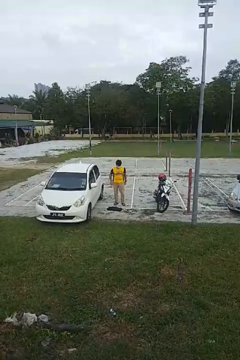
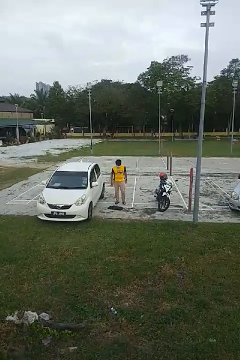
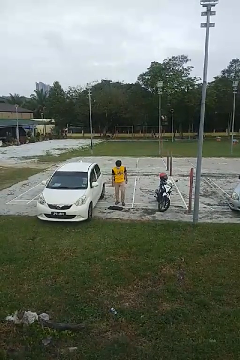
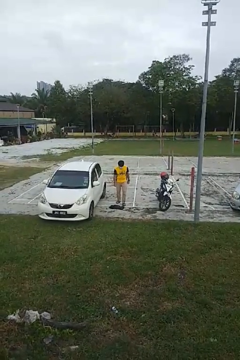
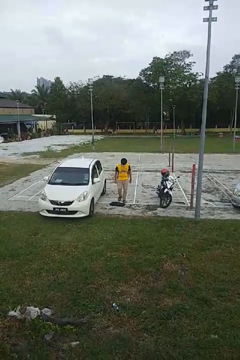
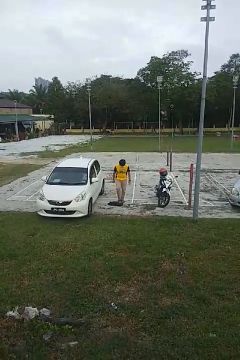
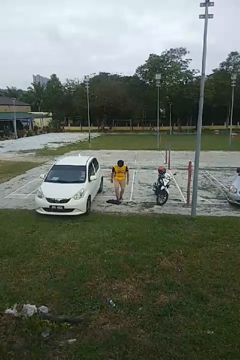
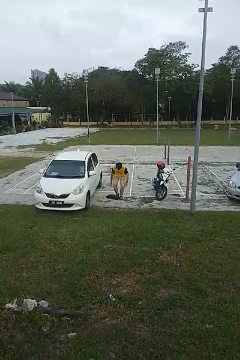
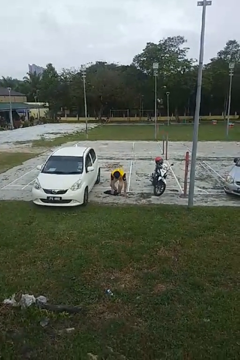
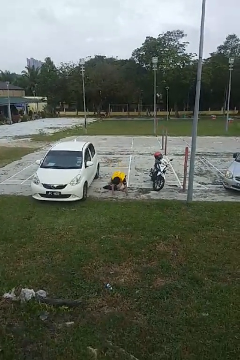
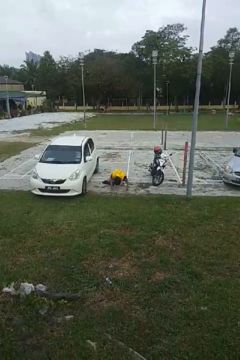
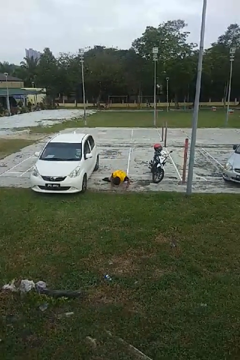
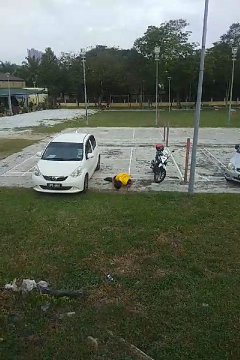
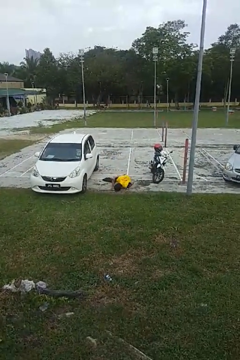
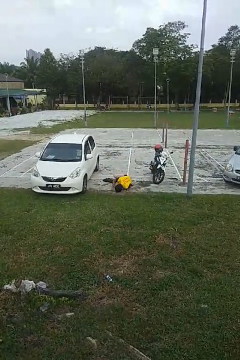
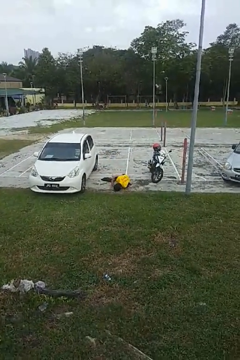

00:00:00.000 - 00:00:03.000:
person trips on object on floor

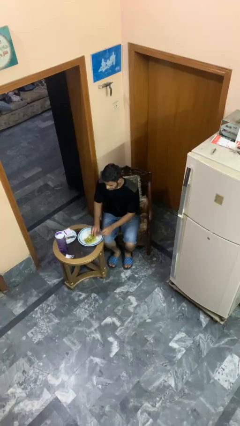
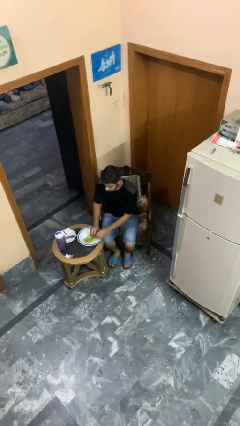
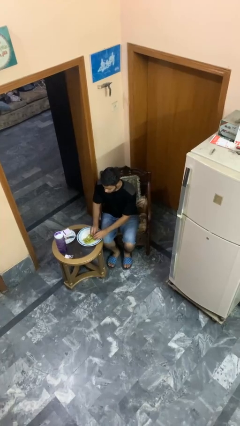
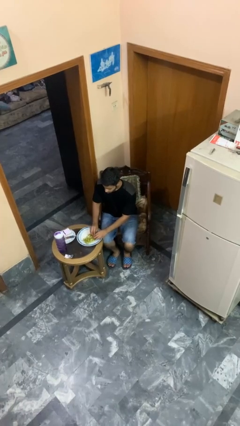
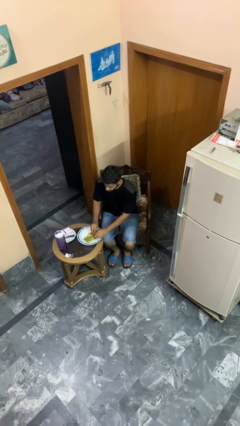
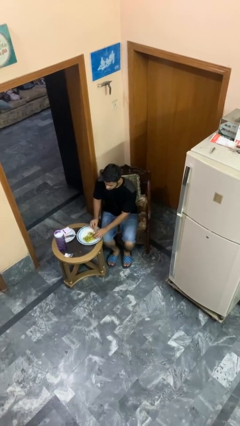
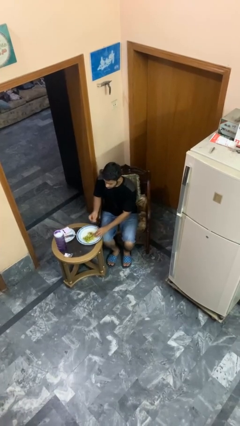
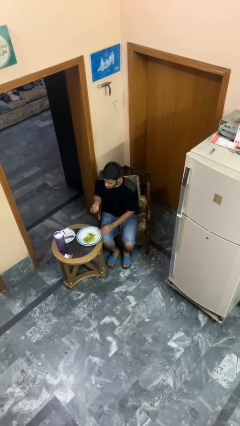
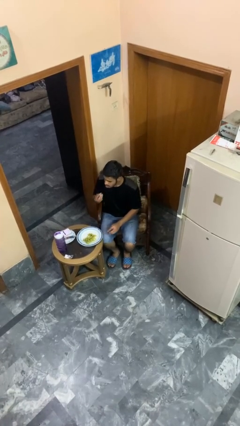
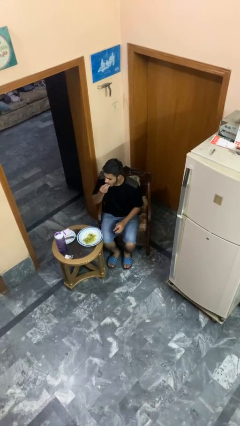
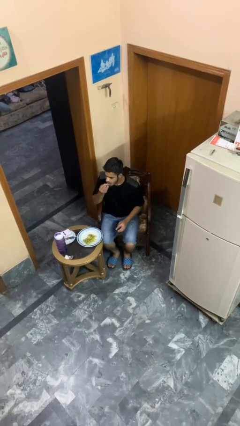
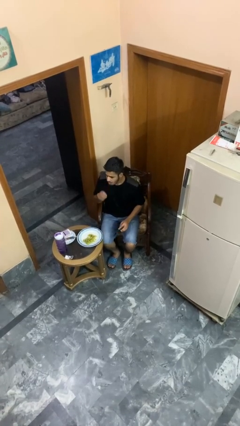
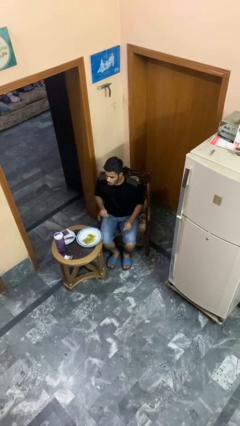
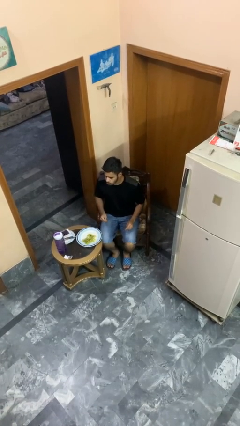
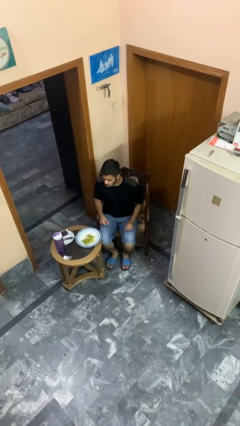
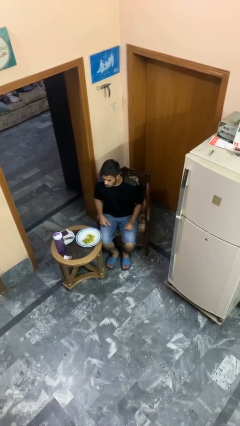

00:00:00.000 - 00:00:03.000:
person eats with hands

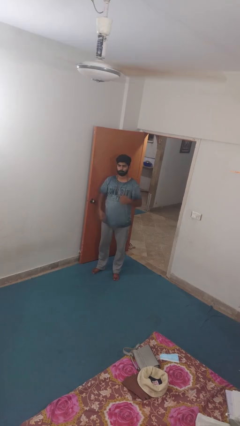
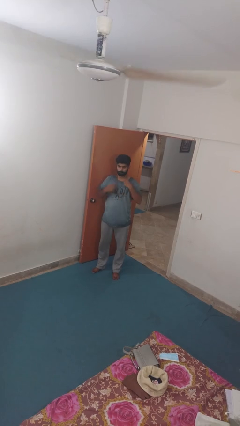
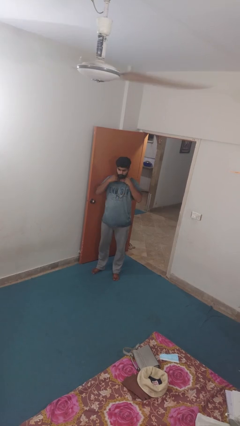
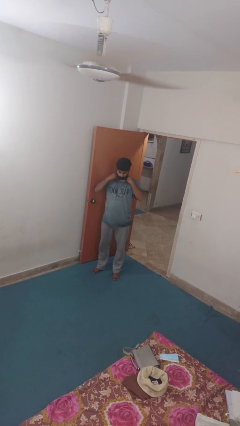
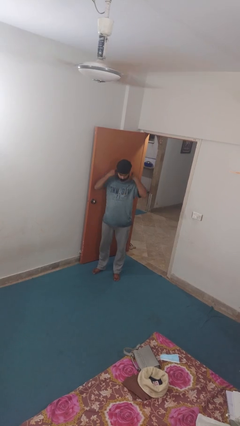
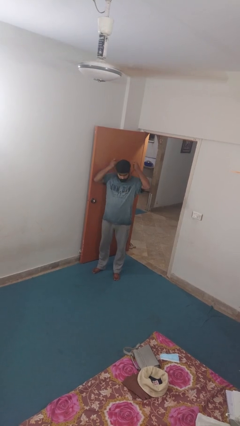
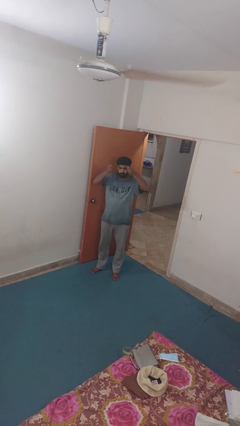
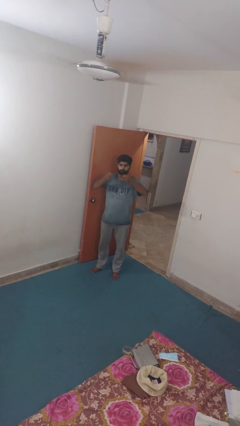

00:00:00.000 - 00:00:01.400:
person takes off necklace

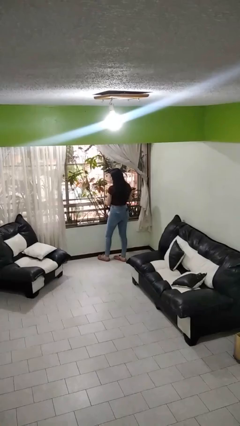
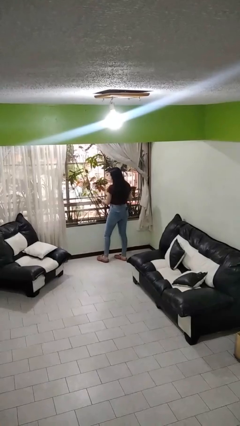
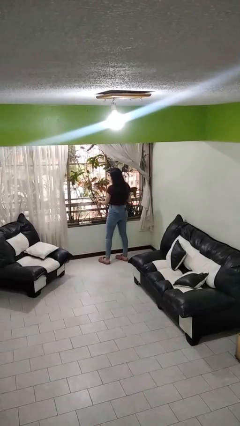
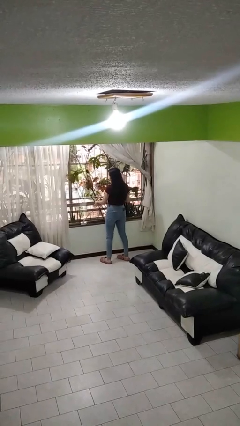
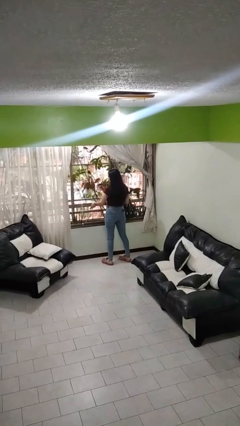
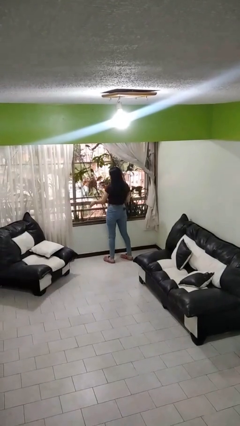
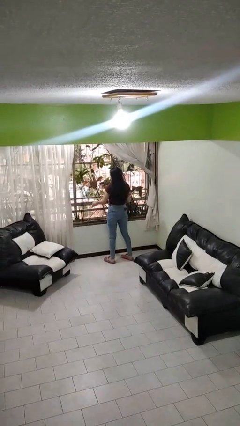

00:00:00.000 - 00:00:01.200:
person closes home window

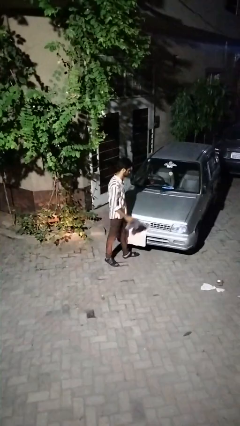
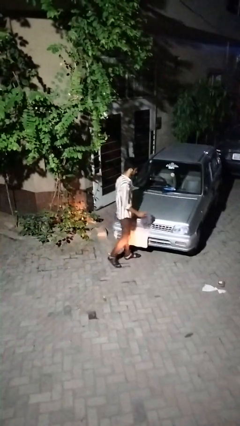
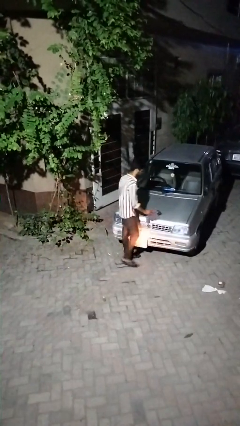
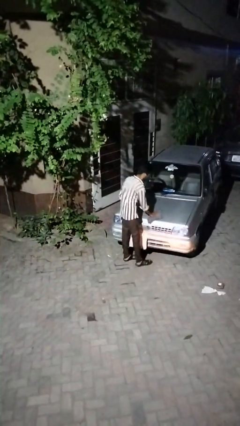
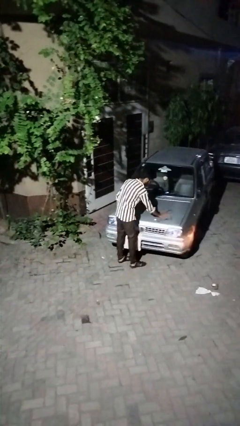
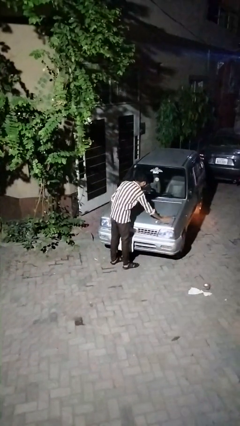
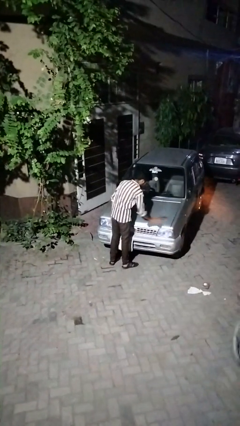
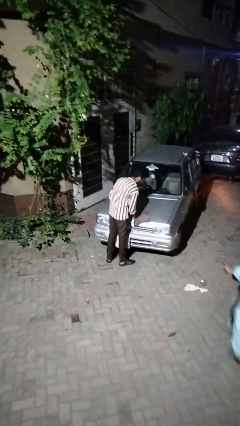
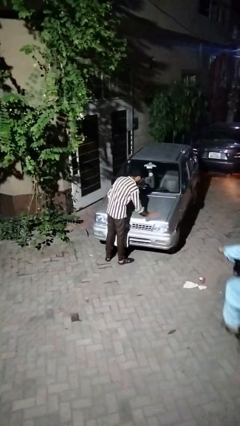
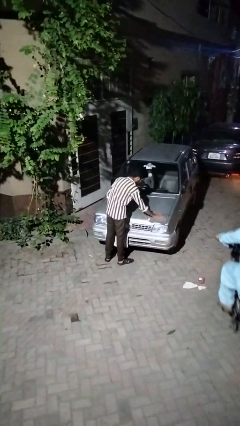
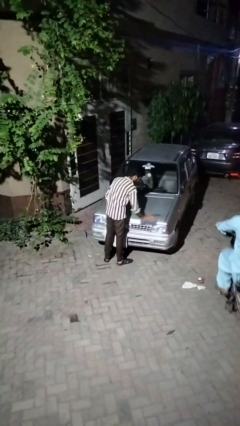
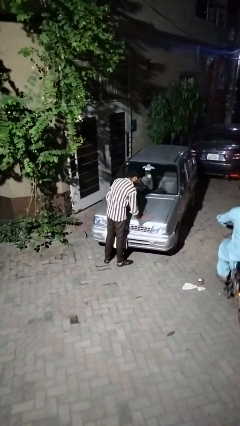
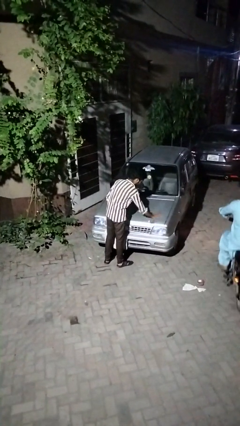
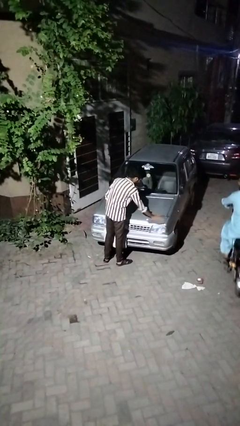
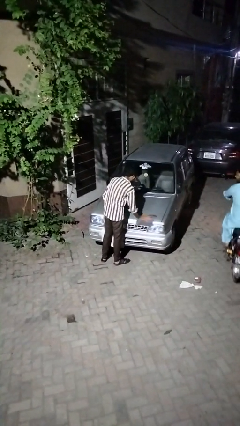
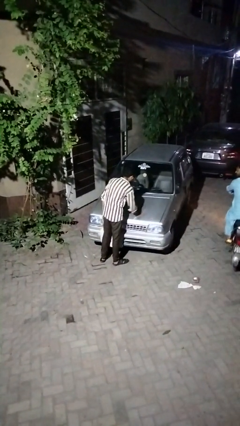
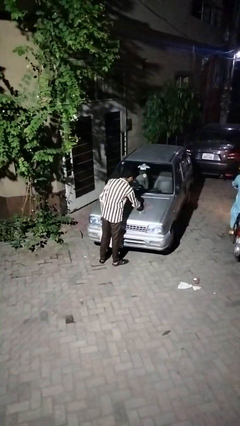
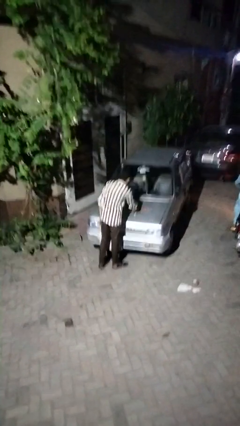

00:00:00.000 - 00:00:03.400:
person polishes car with rag

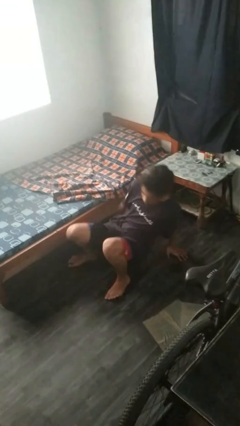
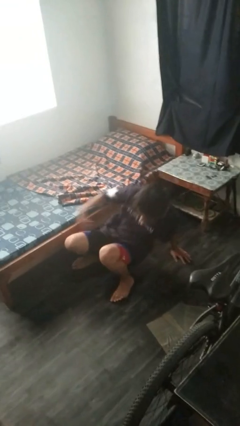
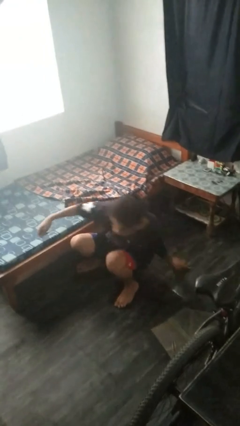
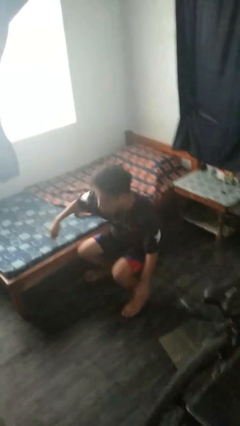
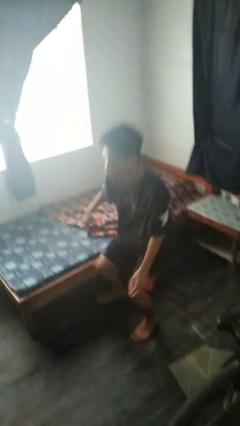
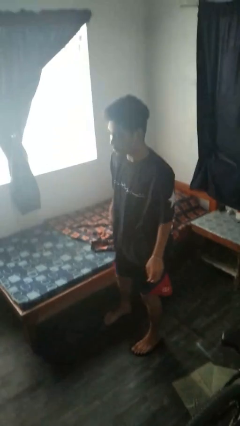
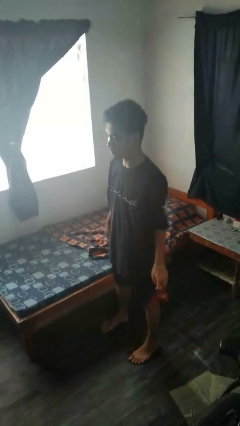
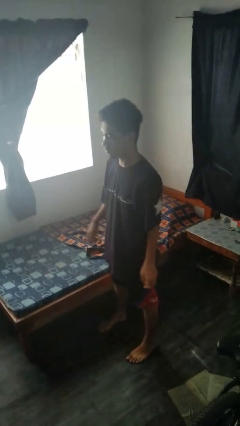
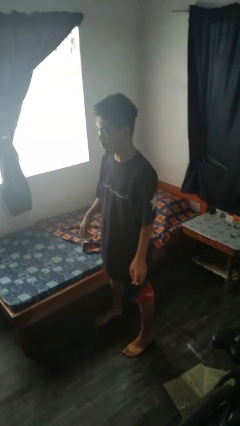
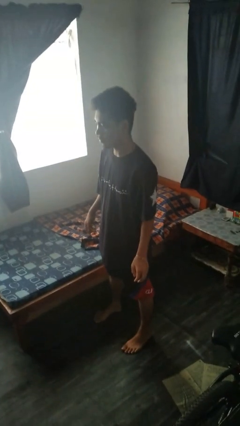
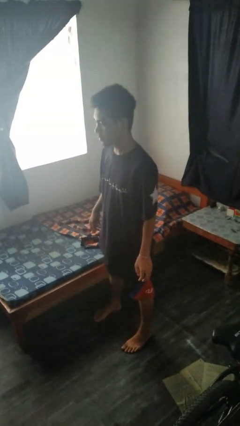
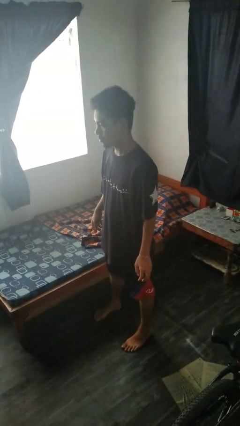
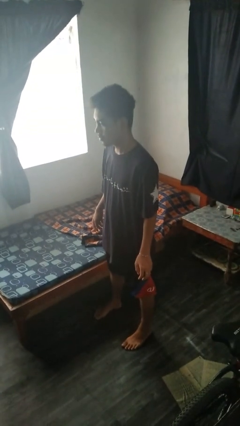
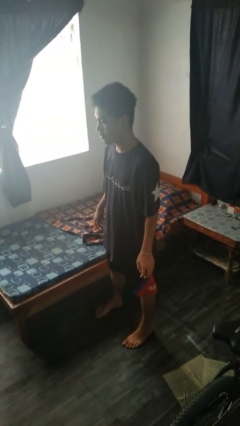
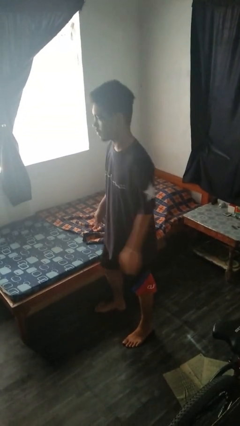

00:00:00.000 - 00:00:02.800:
person stands up from floor

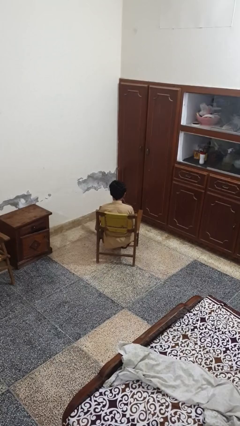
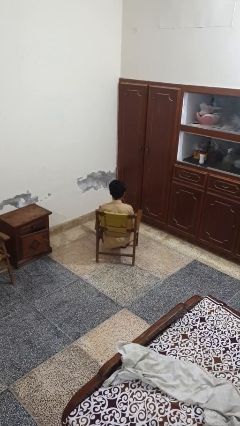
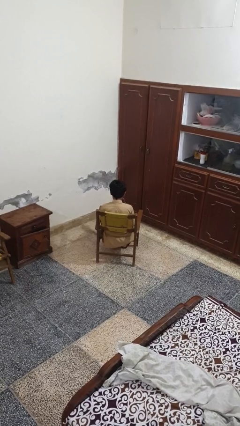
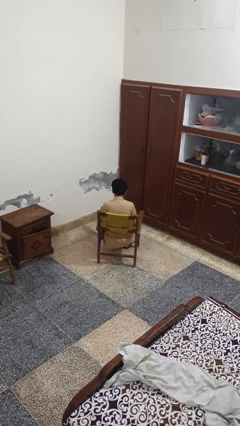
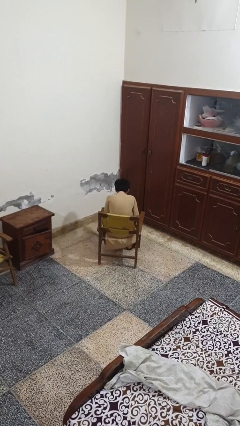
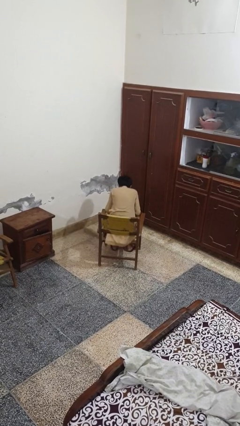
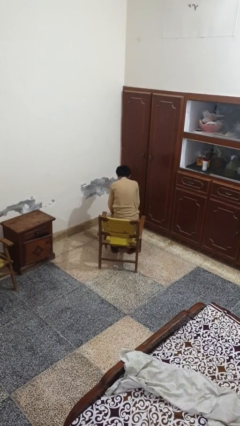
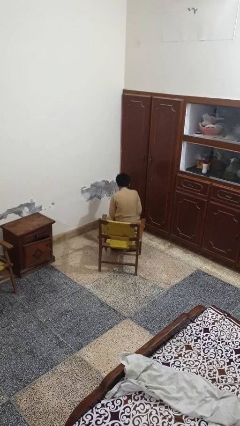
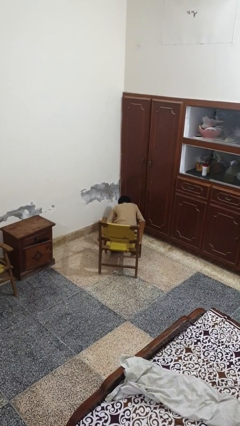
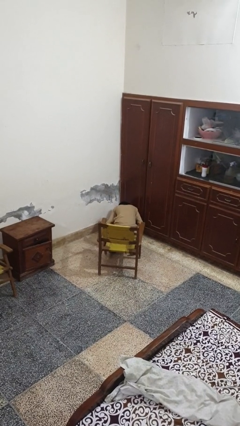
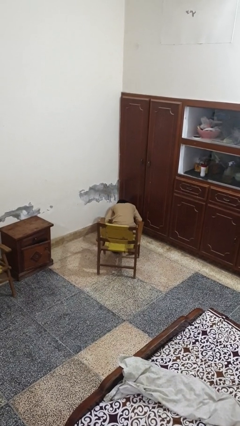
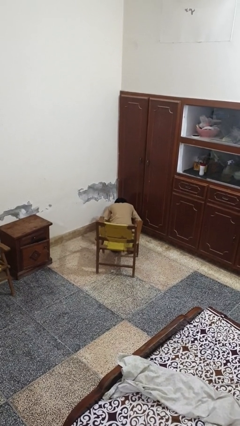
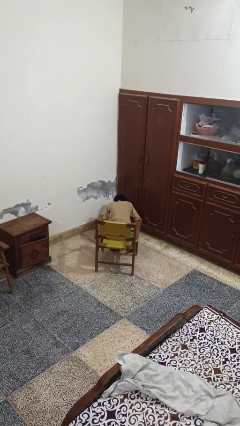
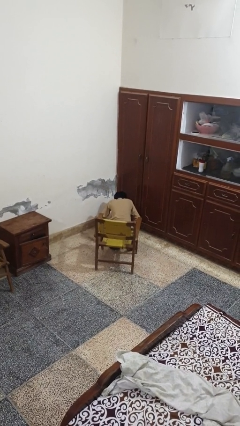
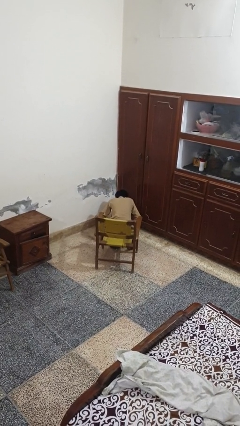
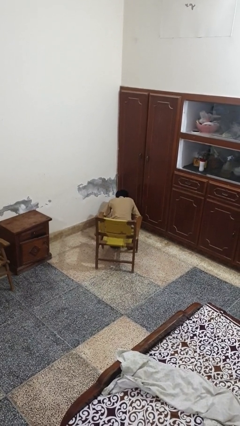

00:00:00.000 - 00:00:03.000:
person falls from chair
